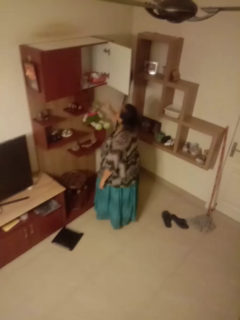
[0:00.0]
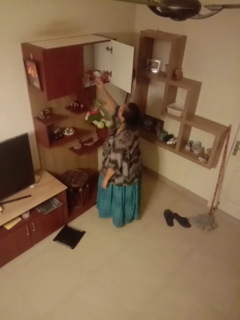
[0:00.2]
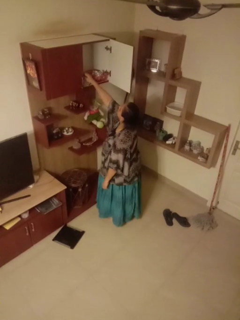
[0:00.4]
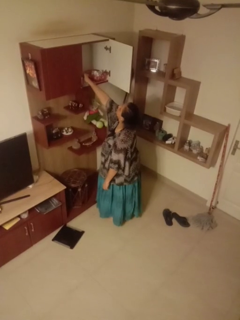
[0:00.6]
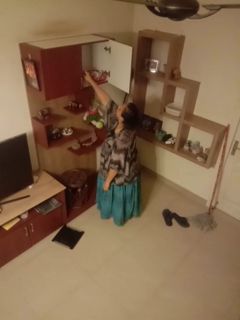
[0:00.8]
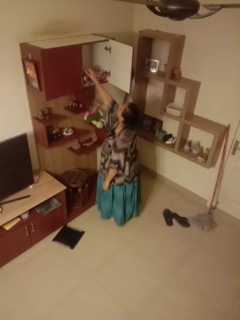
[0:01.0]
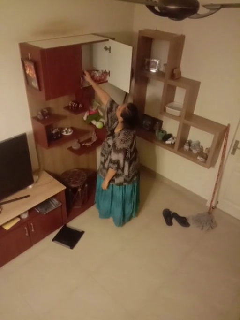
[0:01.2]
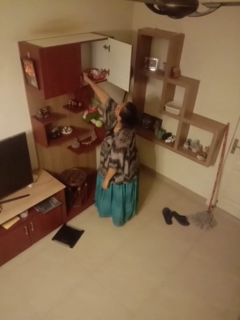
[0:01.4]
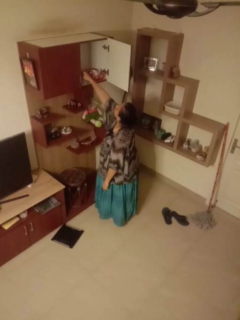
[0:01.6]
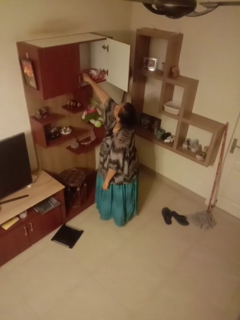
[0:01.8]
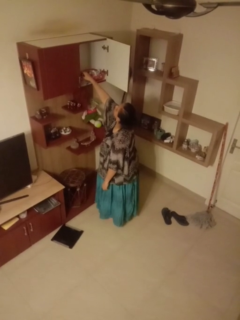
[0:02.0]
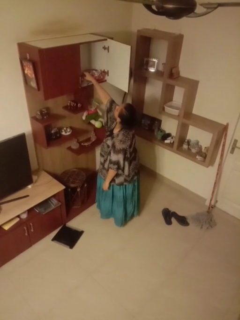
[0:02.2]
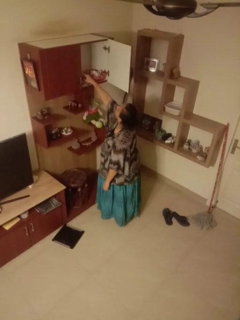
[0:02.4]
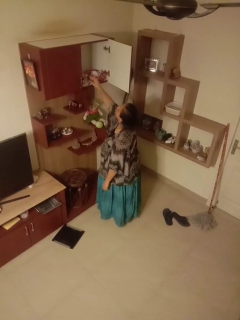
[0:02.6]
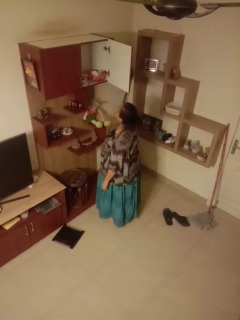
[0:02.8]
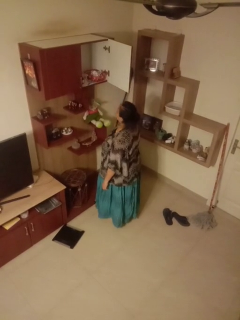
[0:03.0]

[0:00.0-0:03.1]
person searches in cabinet

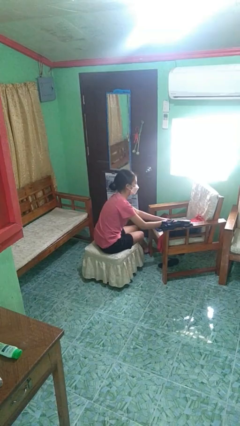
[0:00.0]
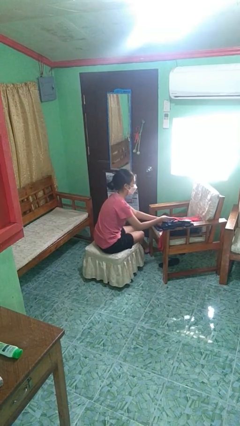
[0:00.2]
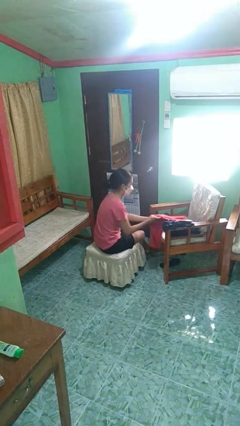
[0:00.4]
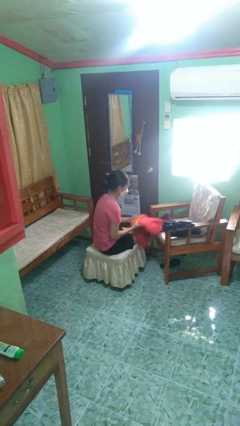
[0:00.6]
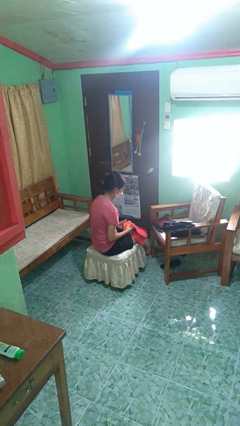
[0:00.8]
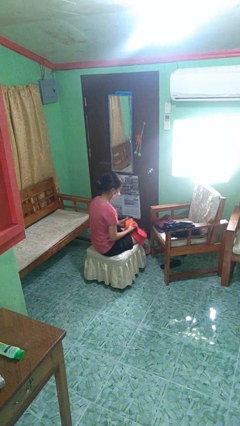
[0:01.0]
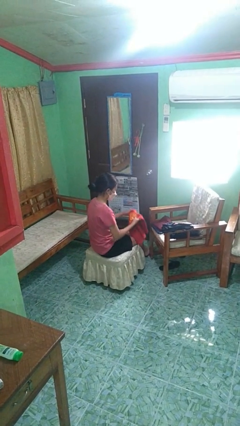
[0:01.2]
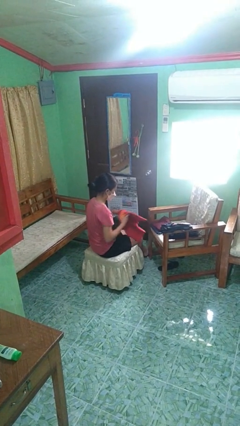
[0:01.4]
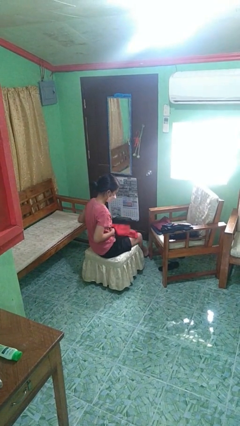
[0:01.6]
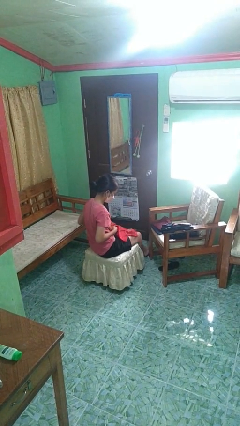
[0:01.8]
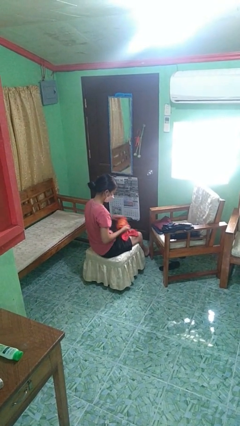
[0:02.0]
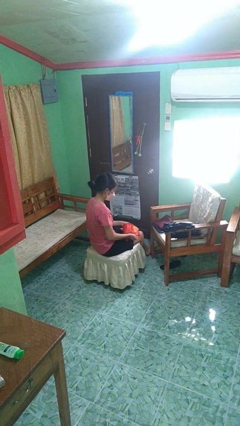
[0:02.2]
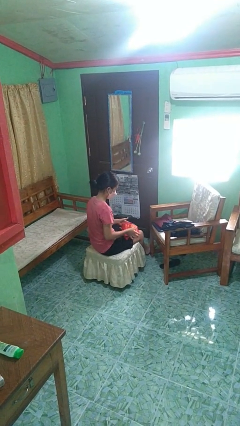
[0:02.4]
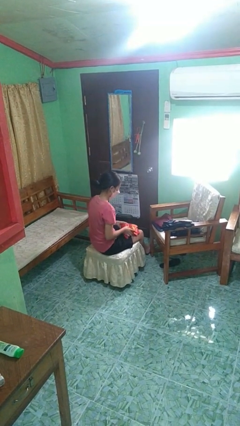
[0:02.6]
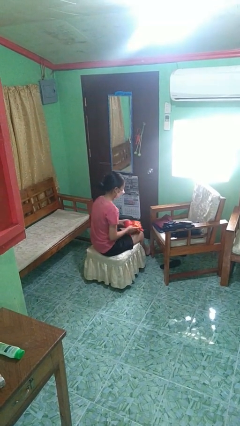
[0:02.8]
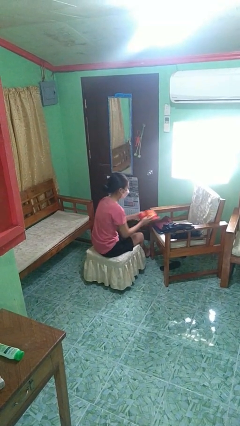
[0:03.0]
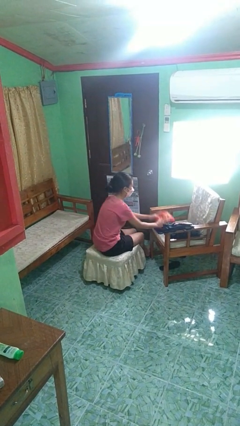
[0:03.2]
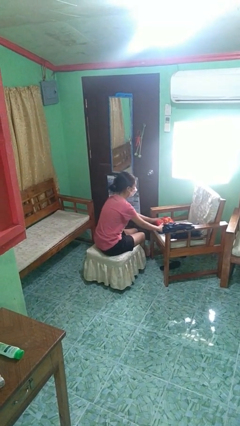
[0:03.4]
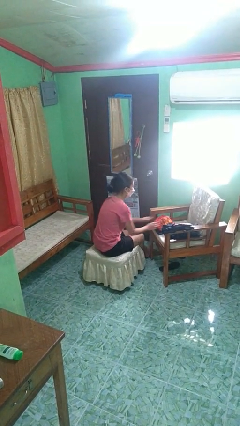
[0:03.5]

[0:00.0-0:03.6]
person folds shirt

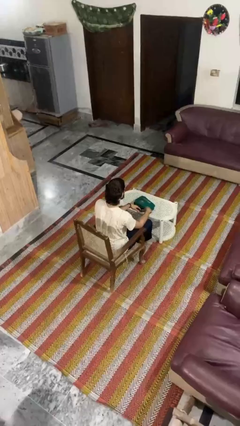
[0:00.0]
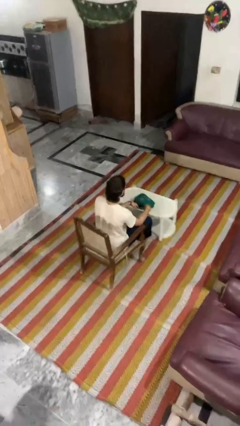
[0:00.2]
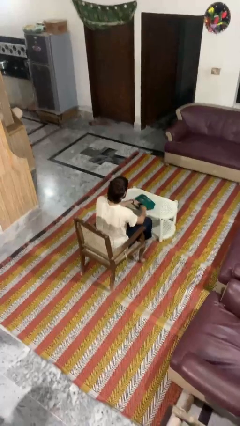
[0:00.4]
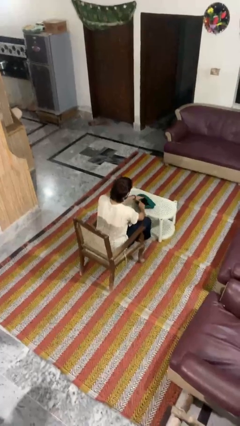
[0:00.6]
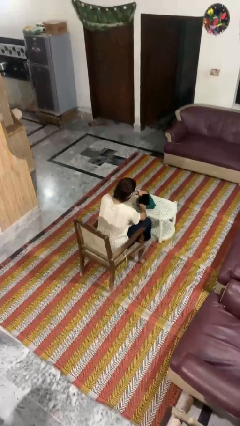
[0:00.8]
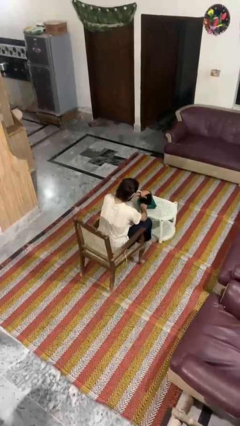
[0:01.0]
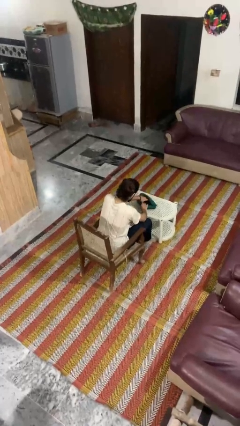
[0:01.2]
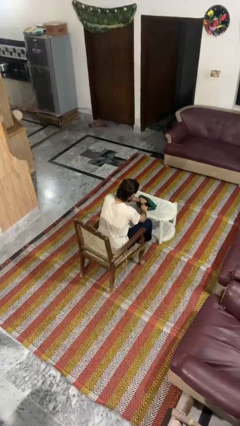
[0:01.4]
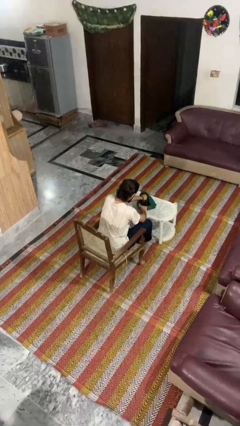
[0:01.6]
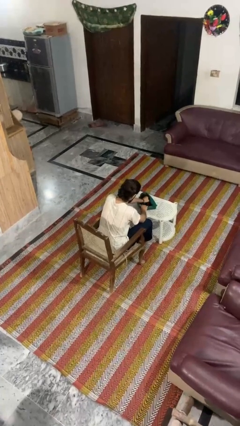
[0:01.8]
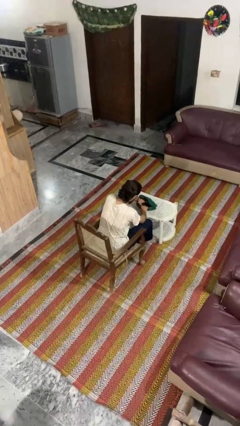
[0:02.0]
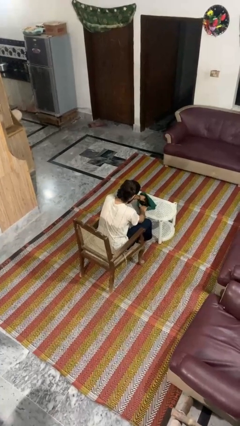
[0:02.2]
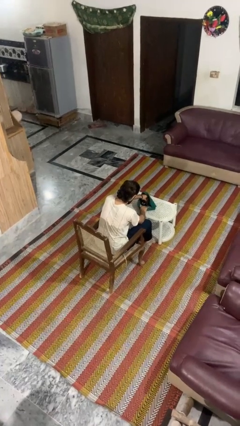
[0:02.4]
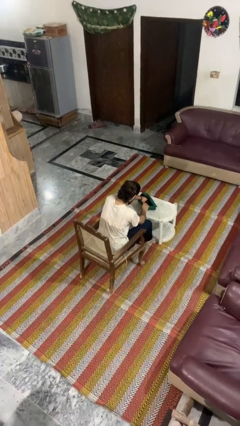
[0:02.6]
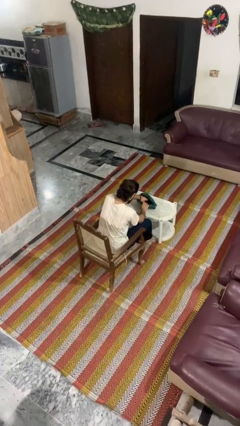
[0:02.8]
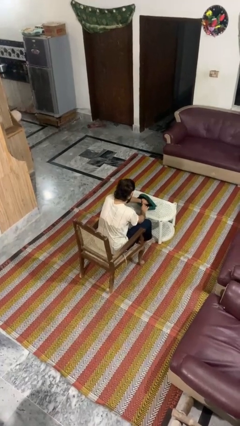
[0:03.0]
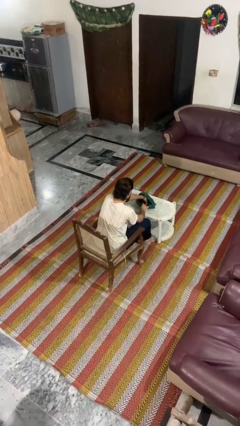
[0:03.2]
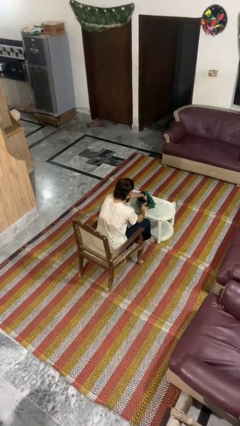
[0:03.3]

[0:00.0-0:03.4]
person searches in purse

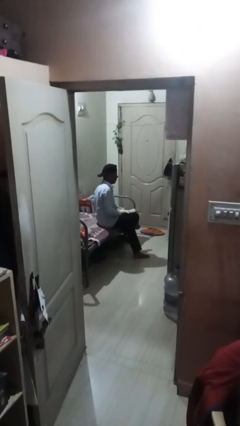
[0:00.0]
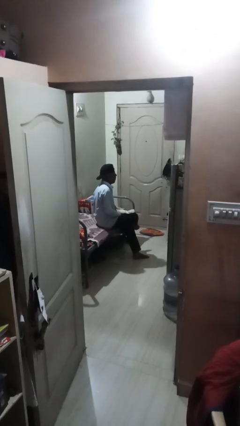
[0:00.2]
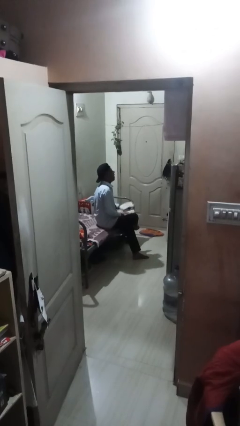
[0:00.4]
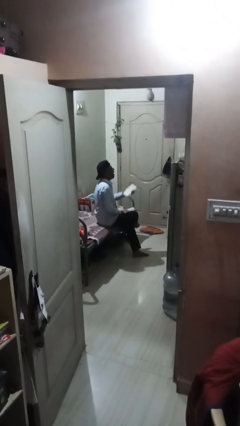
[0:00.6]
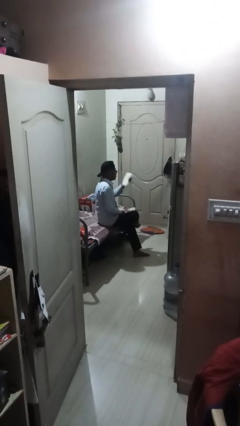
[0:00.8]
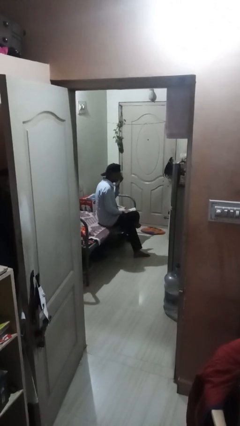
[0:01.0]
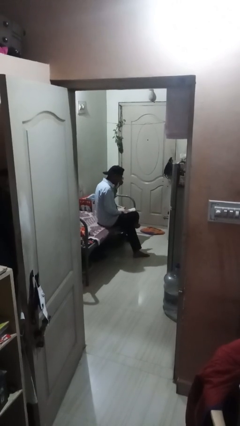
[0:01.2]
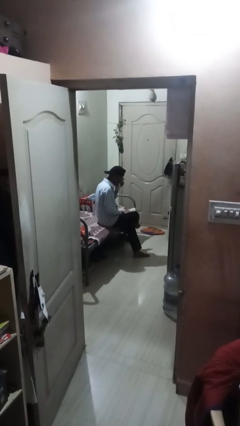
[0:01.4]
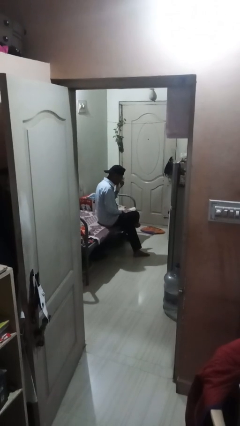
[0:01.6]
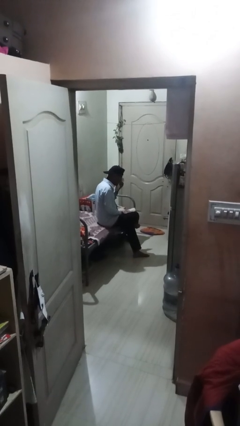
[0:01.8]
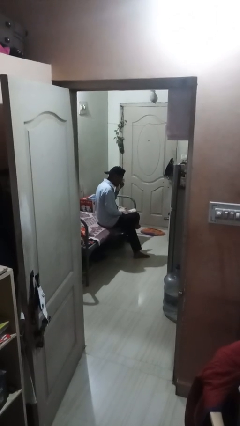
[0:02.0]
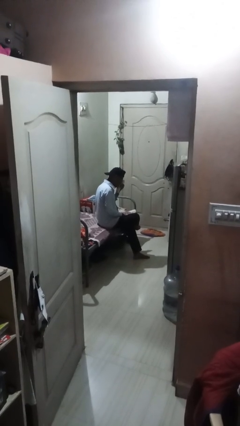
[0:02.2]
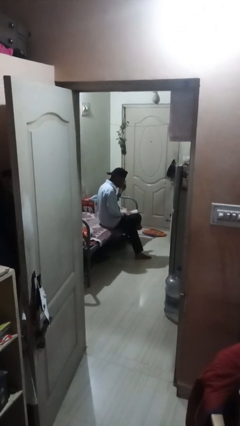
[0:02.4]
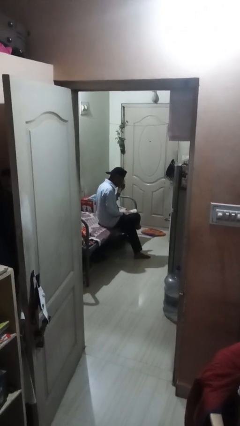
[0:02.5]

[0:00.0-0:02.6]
person blows nose

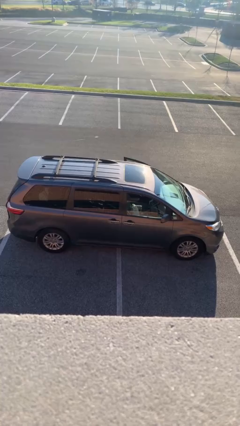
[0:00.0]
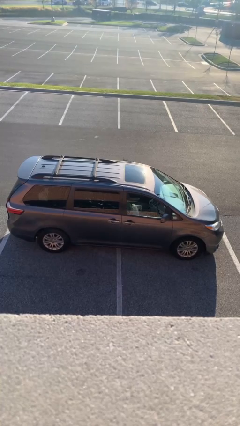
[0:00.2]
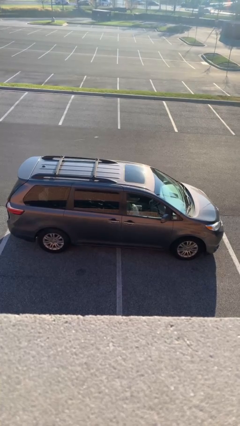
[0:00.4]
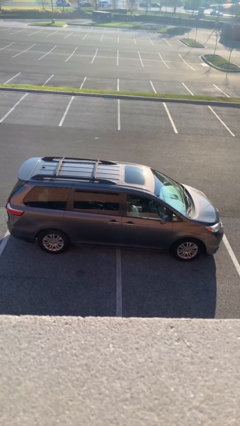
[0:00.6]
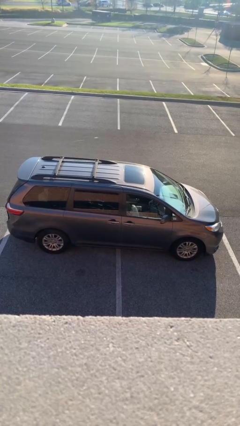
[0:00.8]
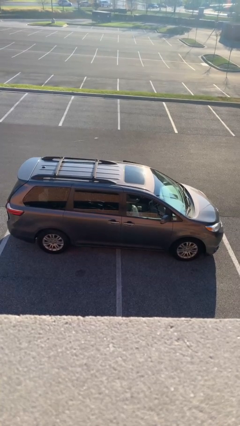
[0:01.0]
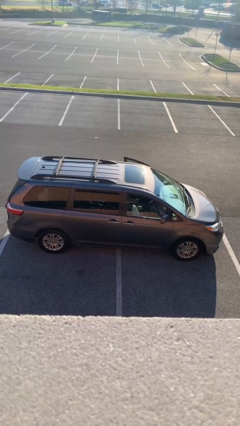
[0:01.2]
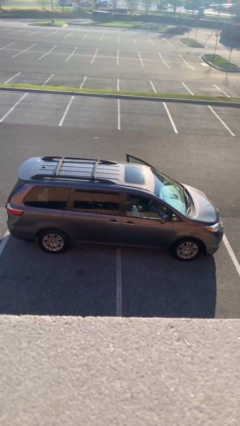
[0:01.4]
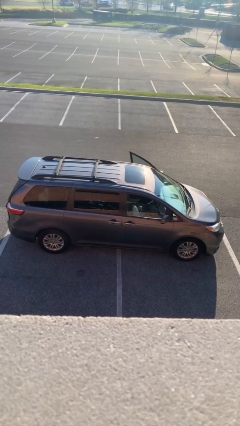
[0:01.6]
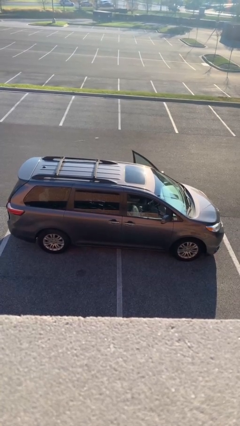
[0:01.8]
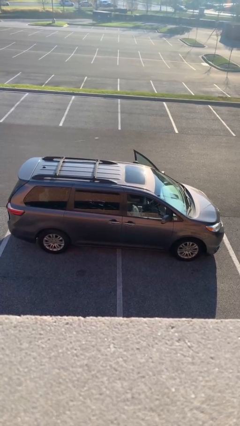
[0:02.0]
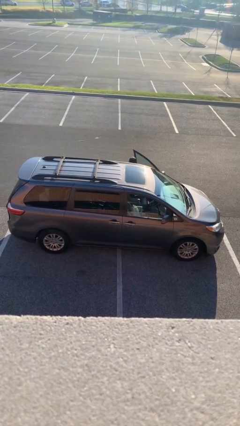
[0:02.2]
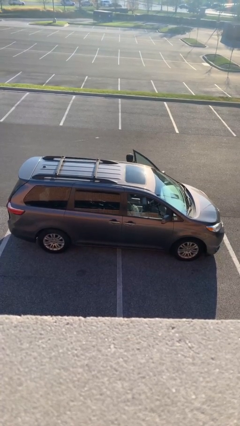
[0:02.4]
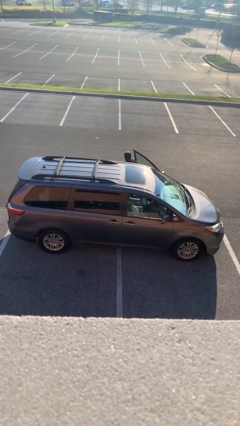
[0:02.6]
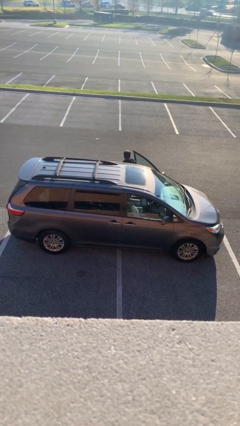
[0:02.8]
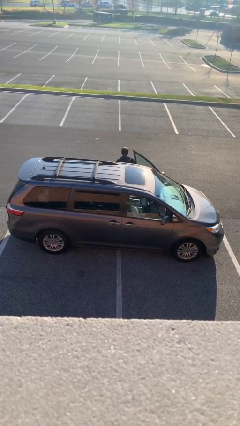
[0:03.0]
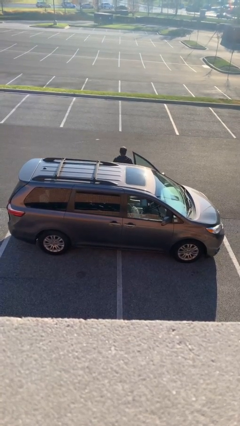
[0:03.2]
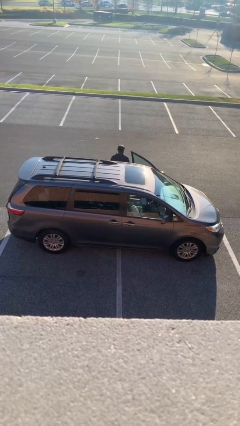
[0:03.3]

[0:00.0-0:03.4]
car drops off person

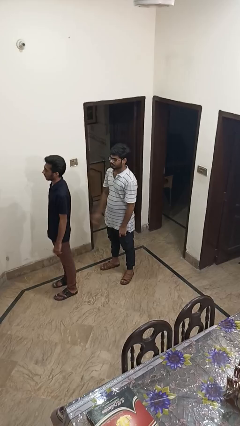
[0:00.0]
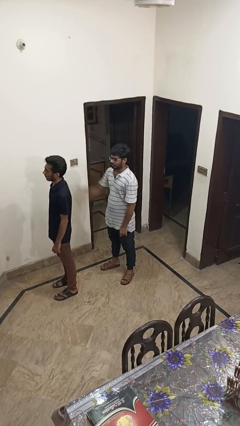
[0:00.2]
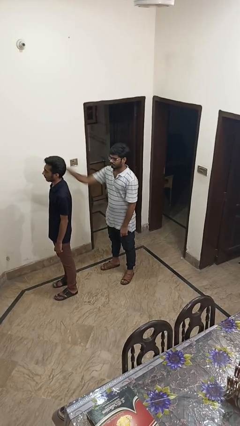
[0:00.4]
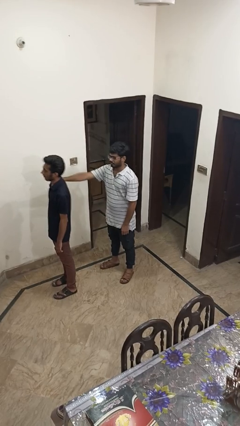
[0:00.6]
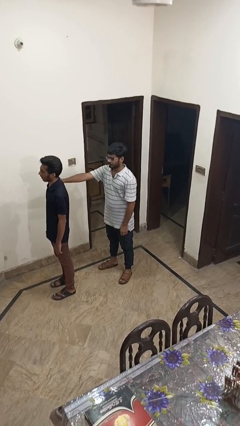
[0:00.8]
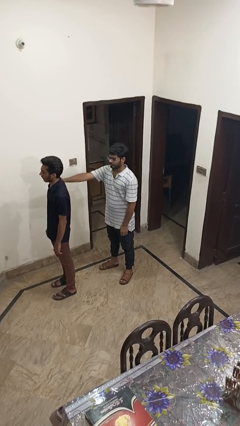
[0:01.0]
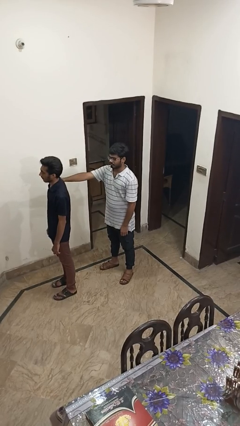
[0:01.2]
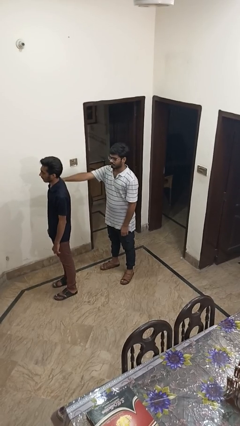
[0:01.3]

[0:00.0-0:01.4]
person grabs person by shoulder

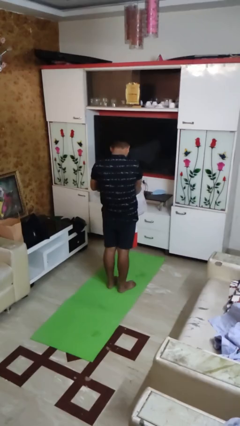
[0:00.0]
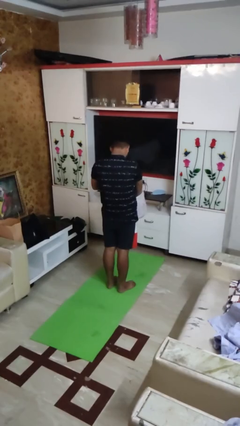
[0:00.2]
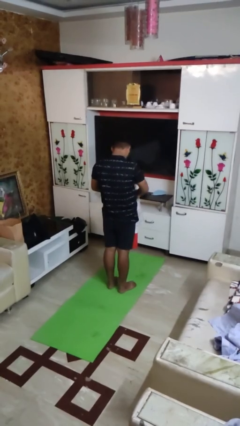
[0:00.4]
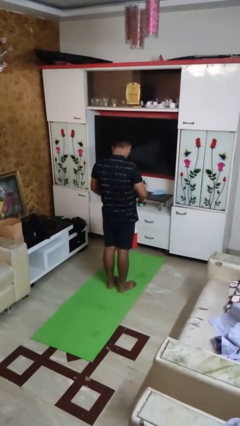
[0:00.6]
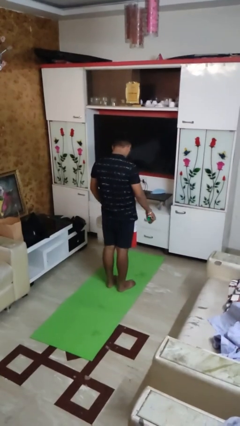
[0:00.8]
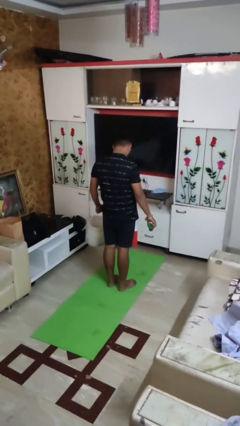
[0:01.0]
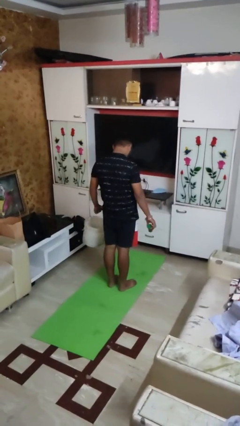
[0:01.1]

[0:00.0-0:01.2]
person takes object from basket
